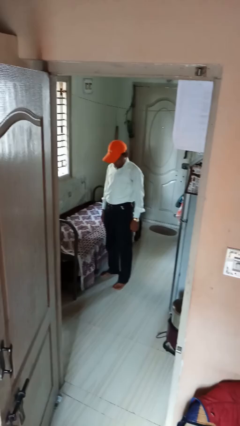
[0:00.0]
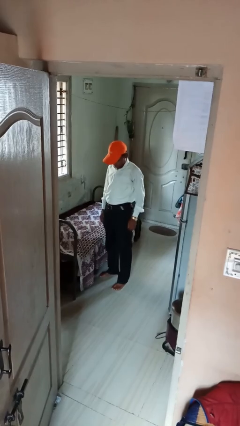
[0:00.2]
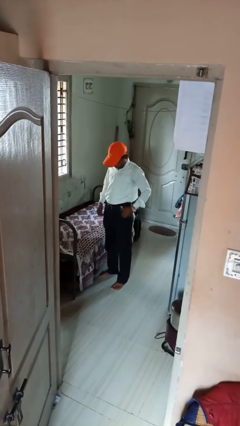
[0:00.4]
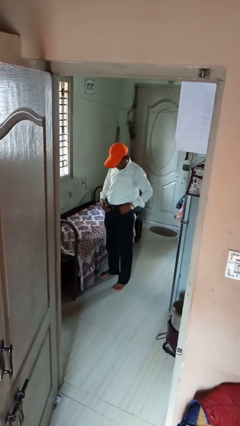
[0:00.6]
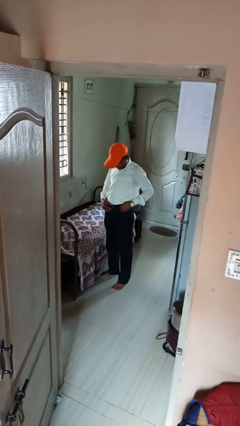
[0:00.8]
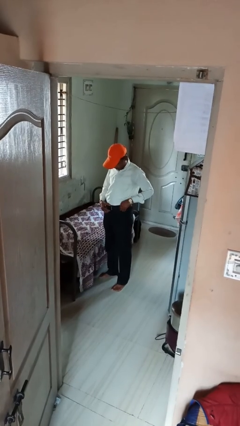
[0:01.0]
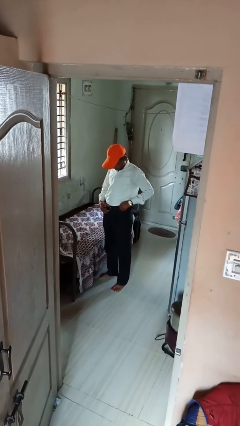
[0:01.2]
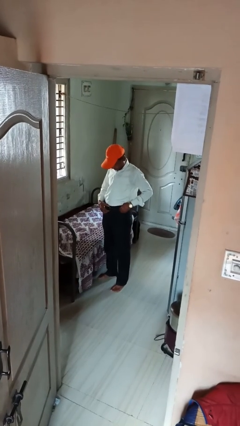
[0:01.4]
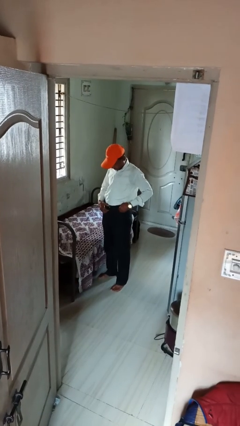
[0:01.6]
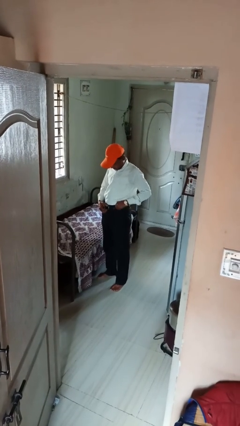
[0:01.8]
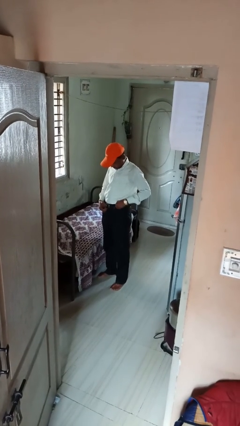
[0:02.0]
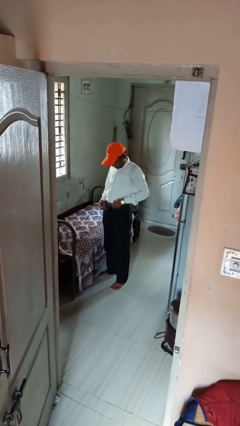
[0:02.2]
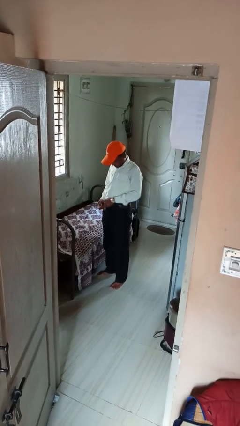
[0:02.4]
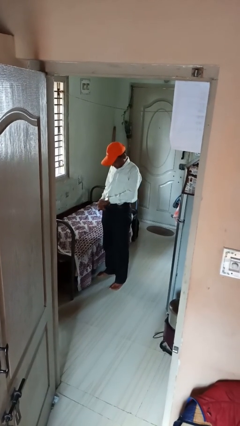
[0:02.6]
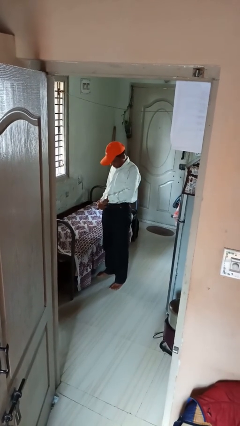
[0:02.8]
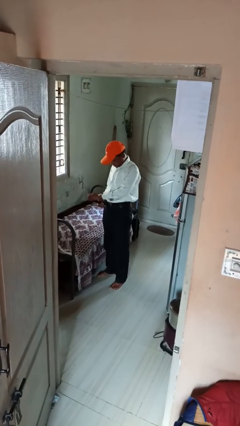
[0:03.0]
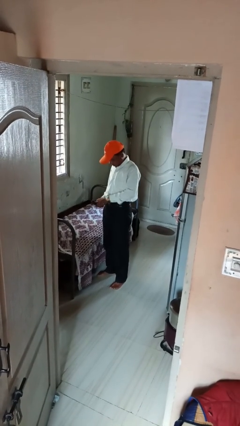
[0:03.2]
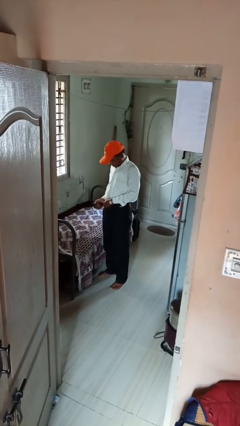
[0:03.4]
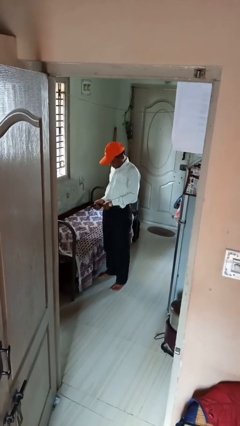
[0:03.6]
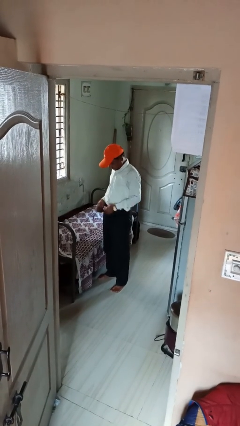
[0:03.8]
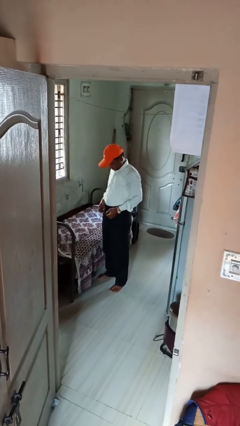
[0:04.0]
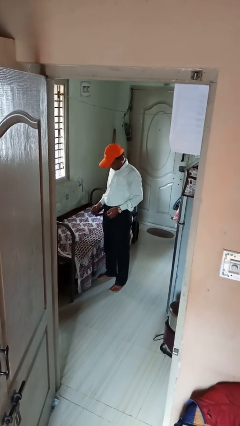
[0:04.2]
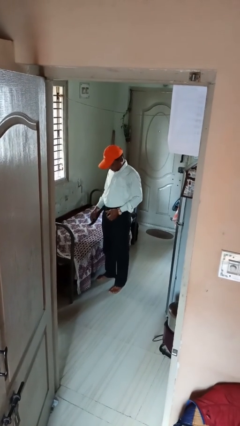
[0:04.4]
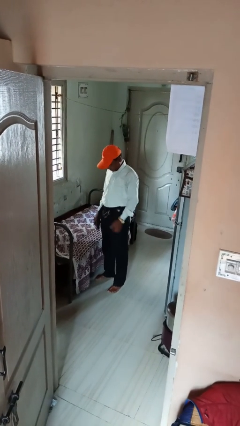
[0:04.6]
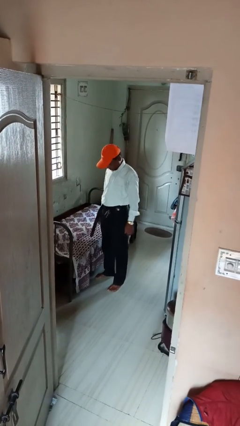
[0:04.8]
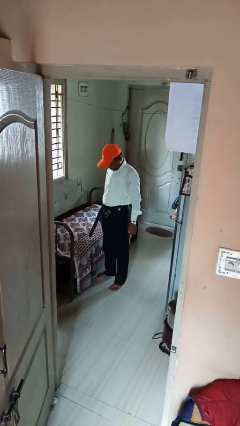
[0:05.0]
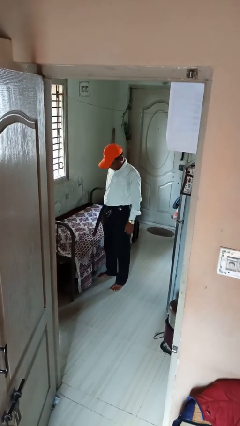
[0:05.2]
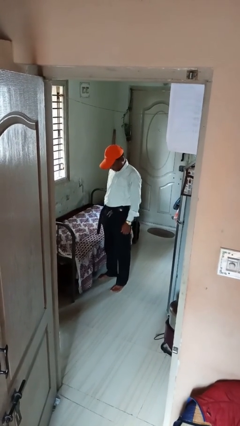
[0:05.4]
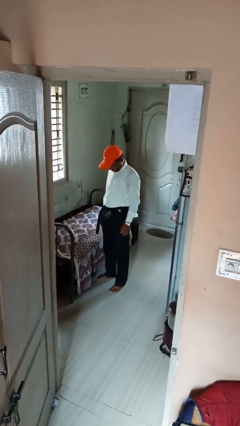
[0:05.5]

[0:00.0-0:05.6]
person takes off belt

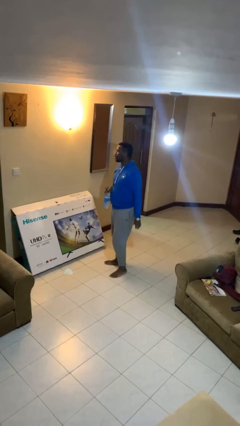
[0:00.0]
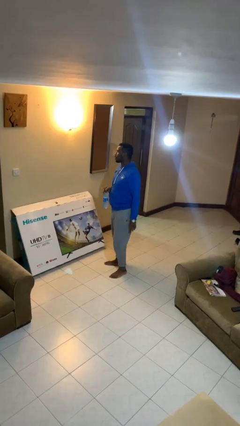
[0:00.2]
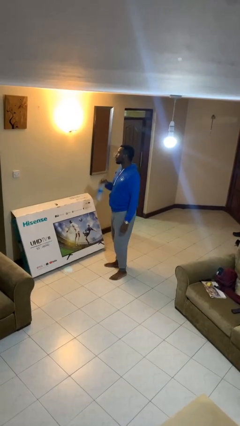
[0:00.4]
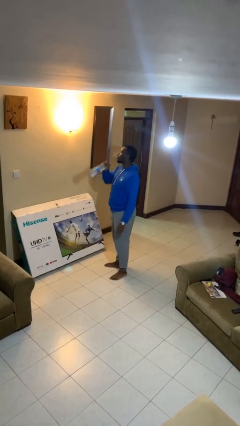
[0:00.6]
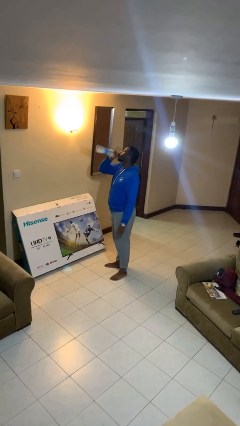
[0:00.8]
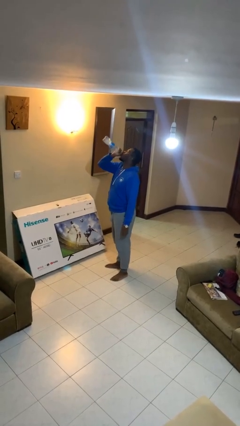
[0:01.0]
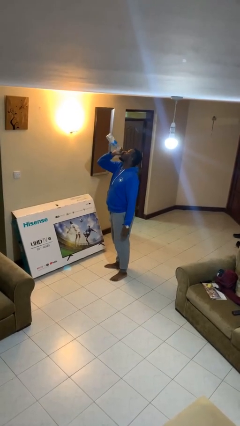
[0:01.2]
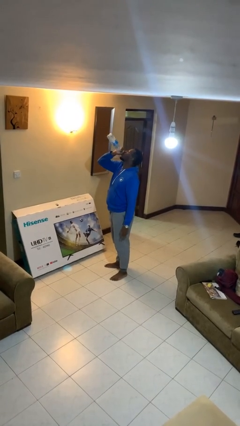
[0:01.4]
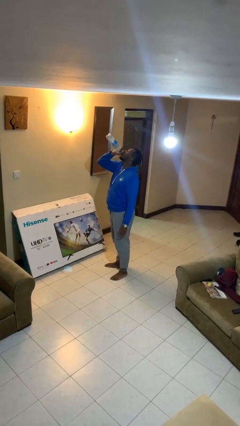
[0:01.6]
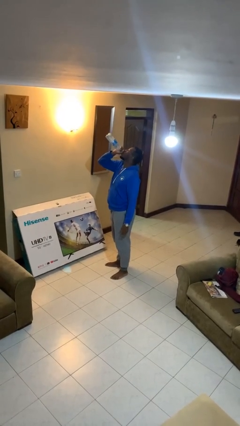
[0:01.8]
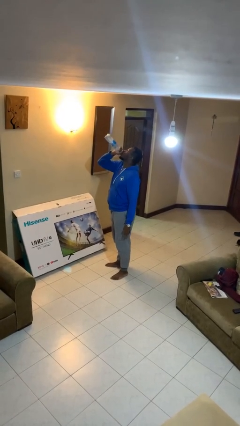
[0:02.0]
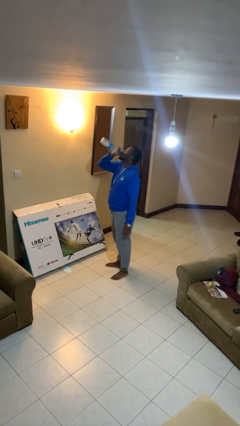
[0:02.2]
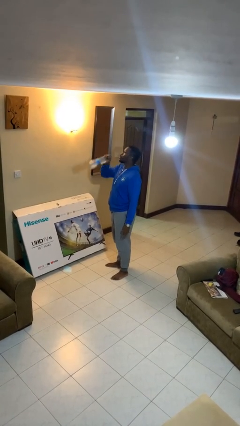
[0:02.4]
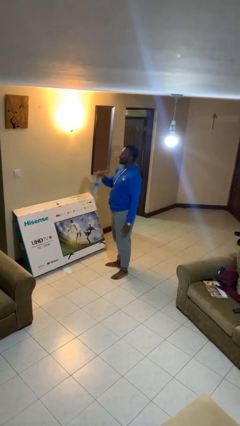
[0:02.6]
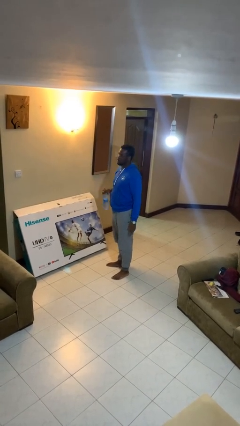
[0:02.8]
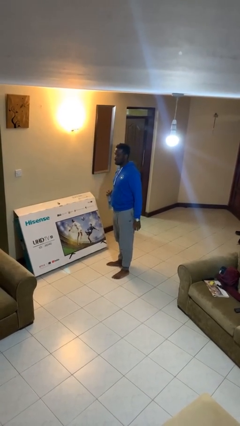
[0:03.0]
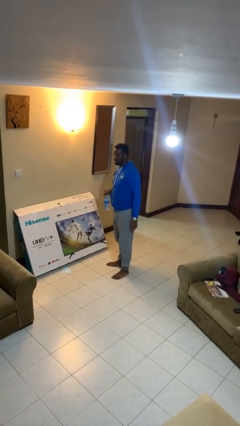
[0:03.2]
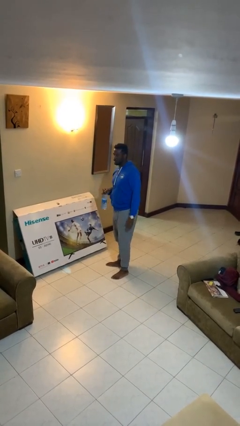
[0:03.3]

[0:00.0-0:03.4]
person drinks from bottle

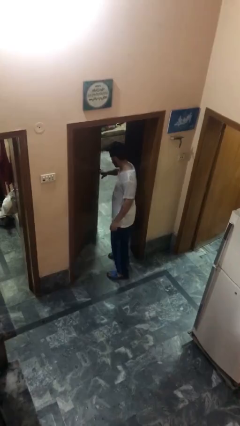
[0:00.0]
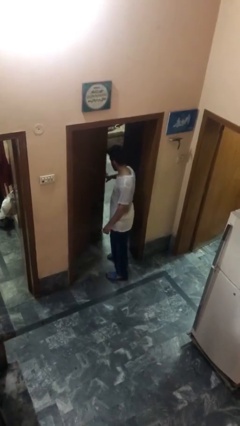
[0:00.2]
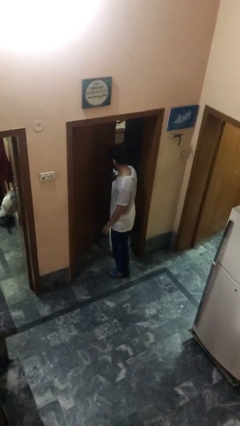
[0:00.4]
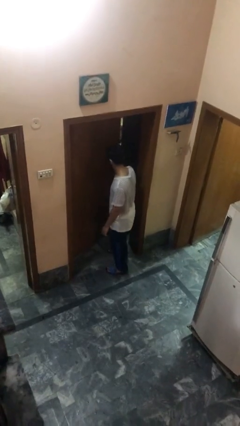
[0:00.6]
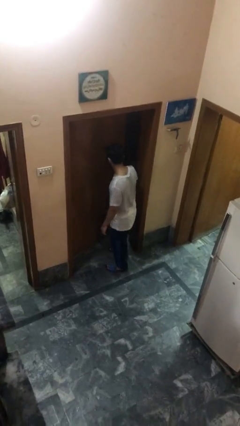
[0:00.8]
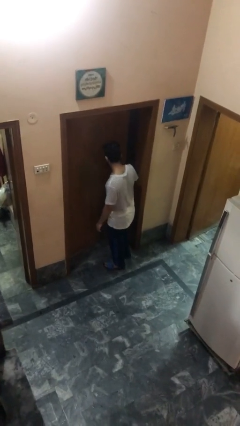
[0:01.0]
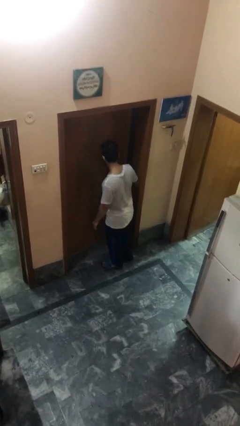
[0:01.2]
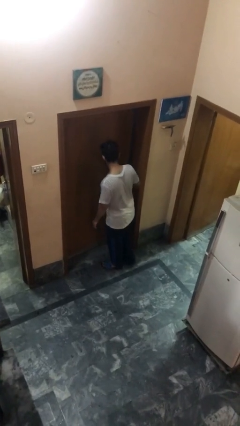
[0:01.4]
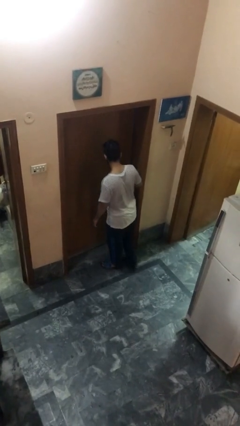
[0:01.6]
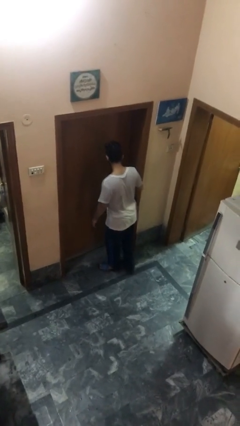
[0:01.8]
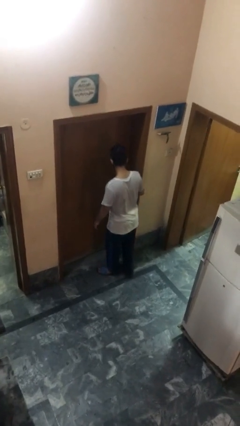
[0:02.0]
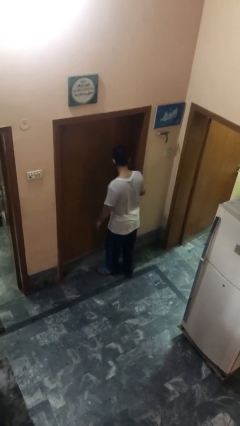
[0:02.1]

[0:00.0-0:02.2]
person closes facility door

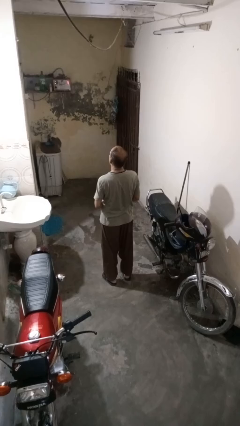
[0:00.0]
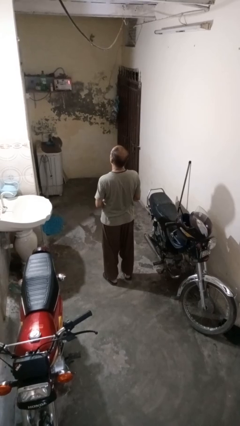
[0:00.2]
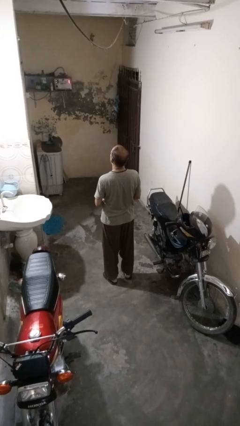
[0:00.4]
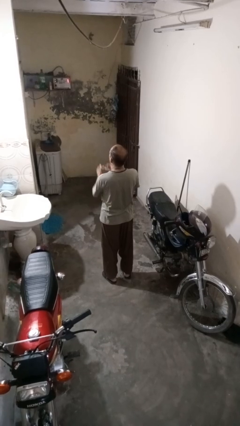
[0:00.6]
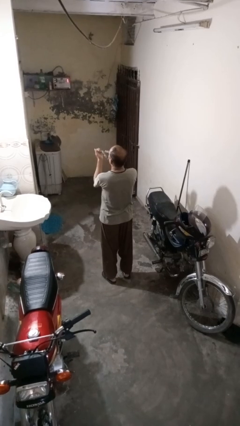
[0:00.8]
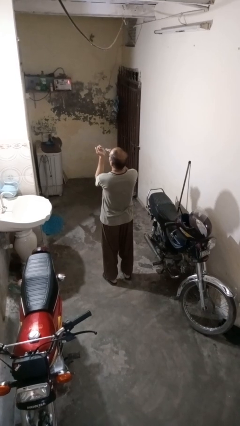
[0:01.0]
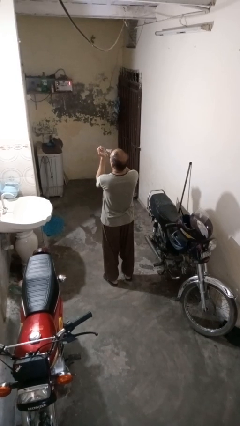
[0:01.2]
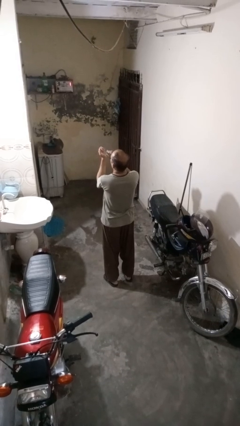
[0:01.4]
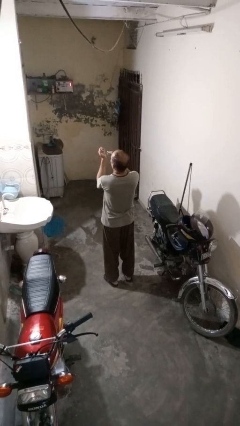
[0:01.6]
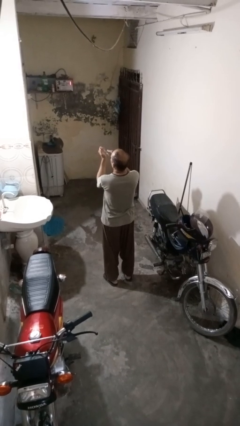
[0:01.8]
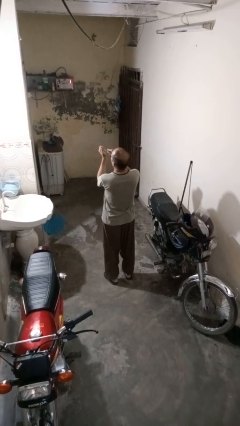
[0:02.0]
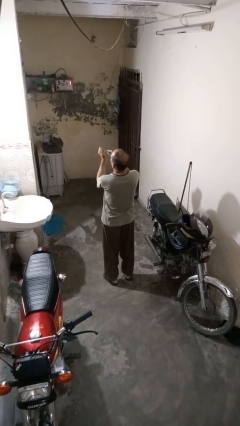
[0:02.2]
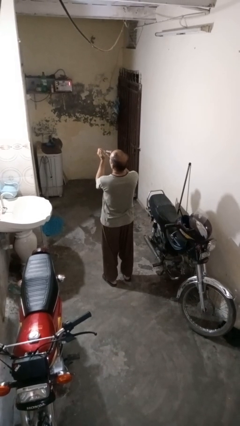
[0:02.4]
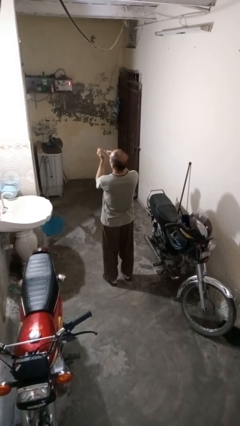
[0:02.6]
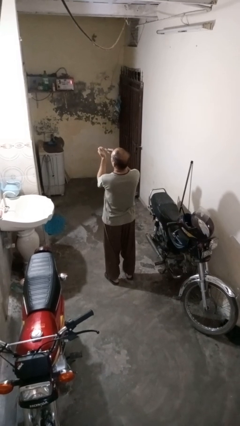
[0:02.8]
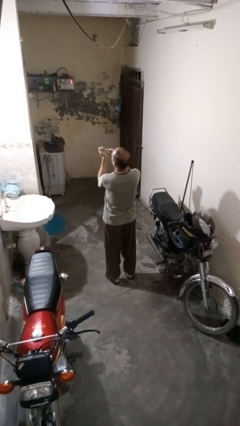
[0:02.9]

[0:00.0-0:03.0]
person clips fingernails

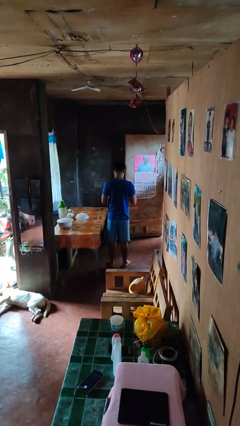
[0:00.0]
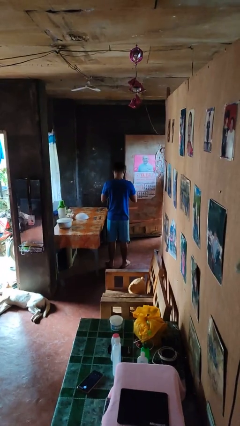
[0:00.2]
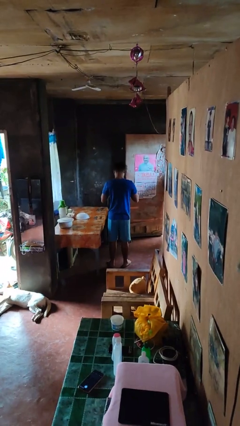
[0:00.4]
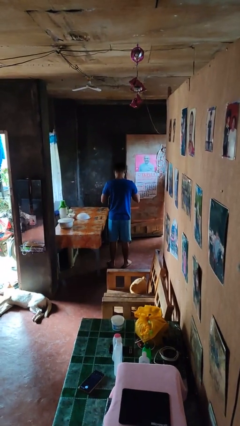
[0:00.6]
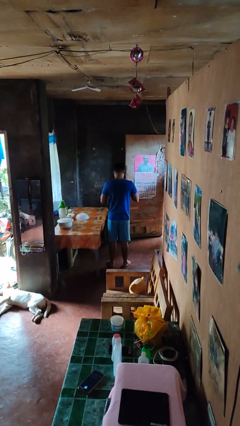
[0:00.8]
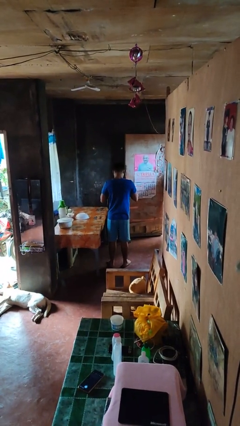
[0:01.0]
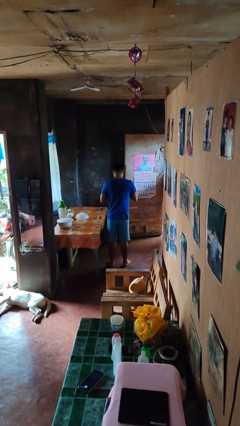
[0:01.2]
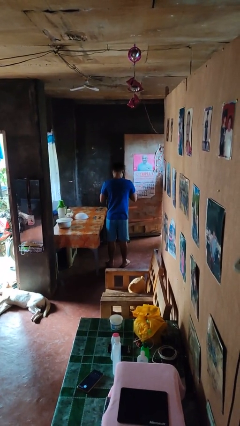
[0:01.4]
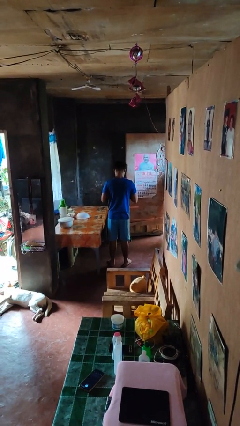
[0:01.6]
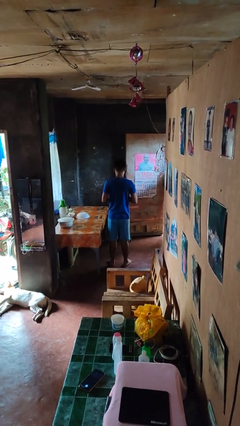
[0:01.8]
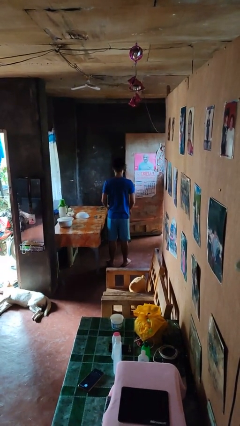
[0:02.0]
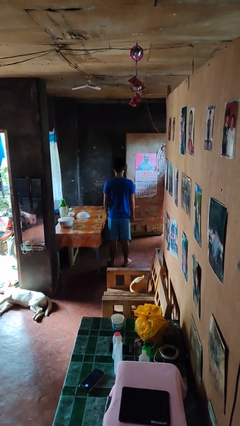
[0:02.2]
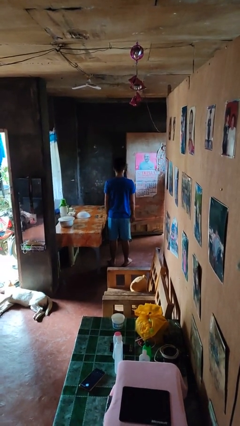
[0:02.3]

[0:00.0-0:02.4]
person unbuttons shirt

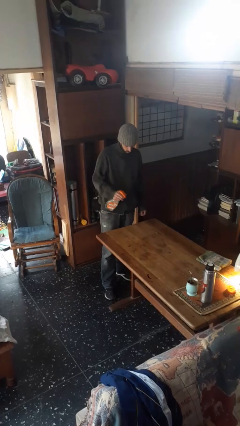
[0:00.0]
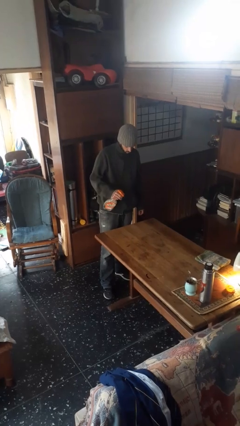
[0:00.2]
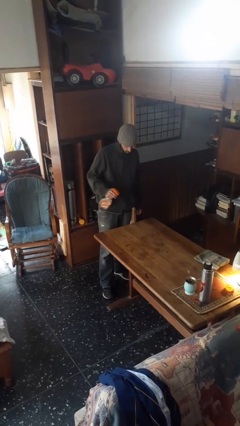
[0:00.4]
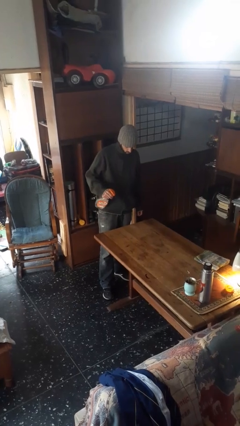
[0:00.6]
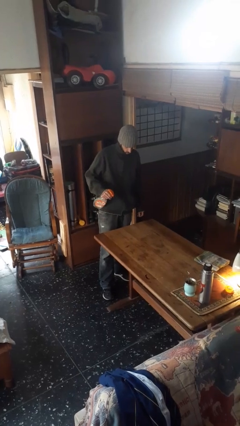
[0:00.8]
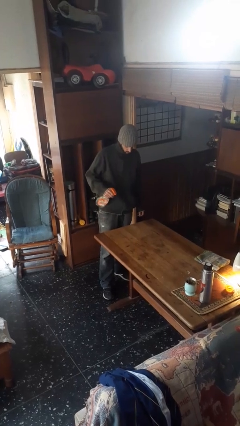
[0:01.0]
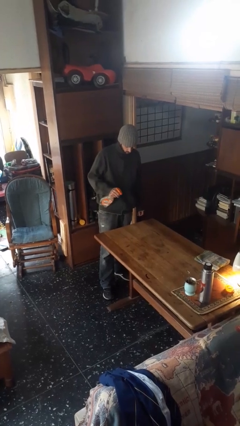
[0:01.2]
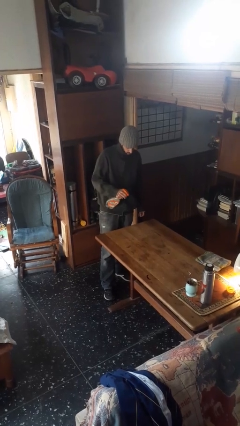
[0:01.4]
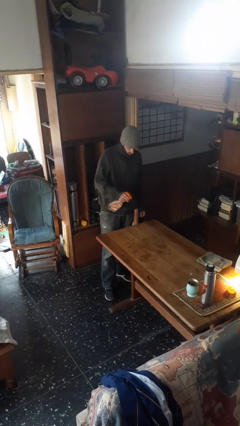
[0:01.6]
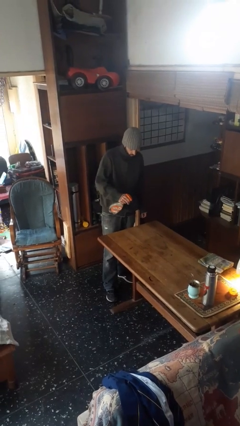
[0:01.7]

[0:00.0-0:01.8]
person sprays from bottle
